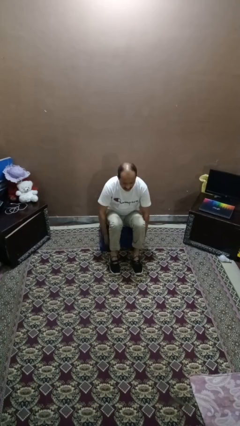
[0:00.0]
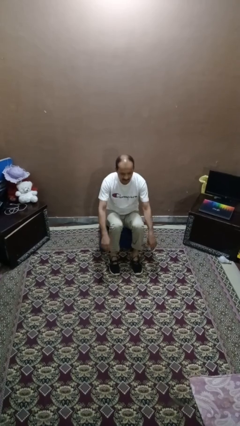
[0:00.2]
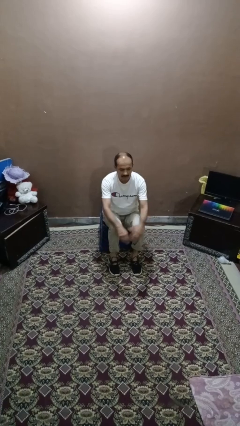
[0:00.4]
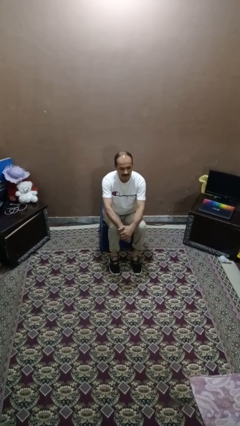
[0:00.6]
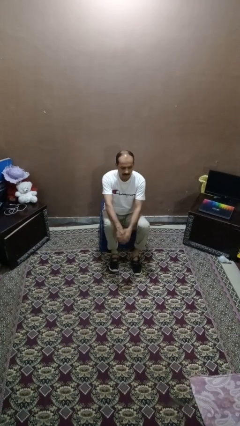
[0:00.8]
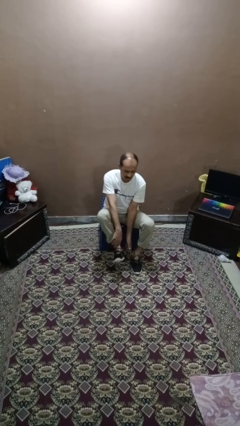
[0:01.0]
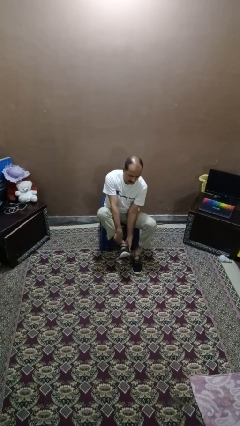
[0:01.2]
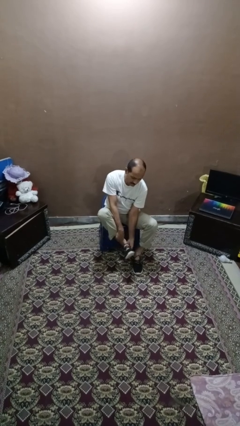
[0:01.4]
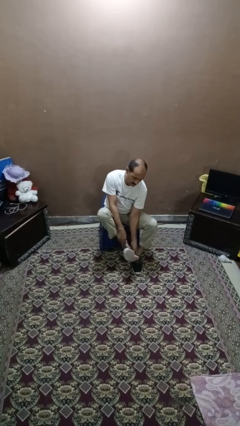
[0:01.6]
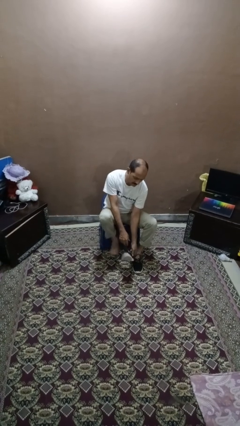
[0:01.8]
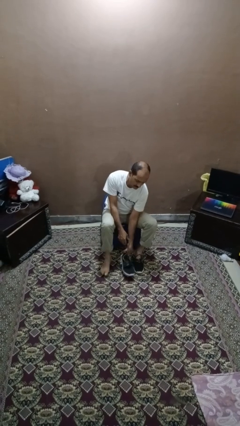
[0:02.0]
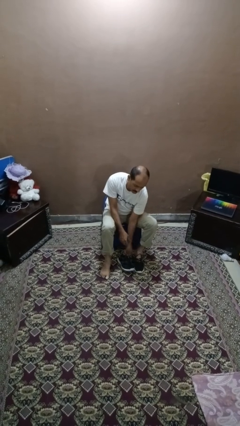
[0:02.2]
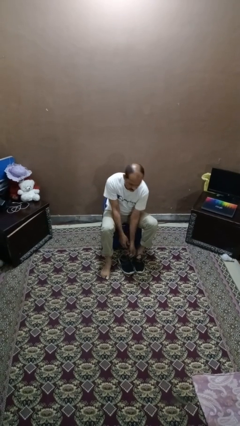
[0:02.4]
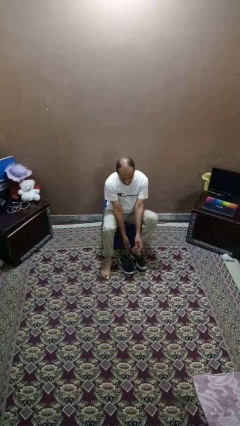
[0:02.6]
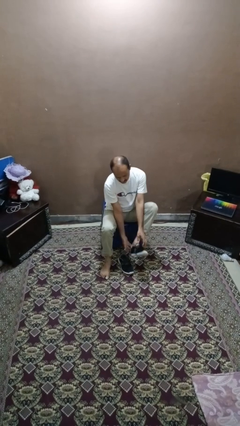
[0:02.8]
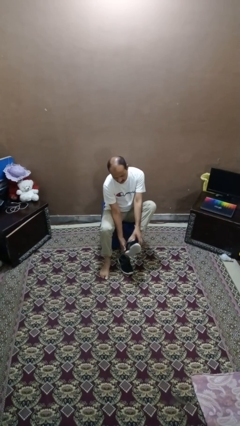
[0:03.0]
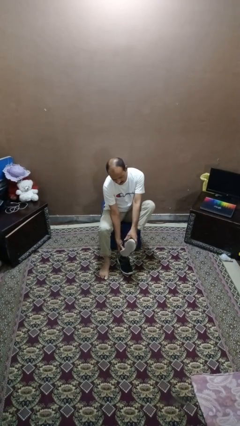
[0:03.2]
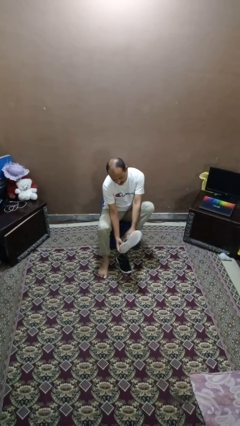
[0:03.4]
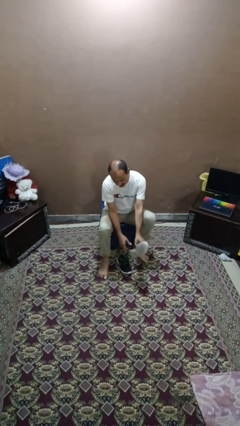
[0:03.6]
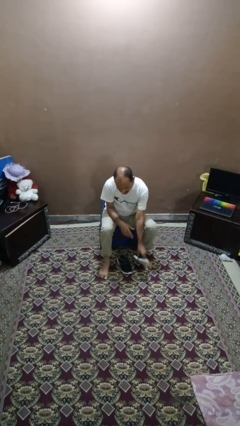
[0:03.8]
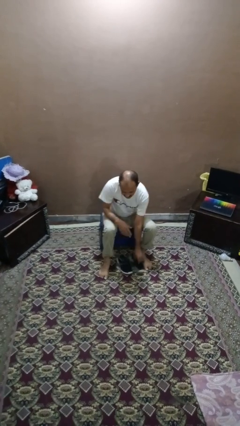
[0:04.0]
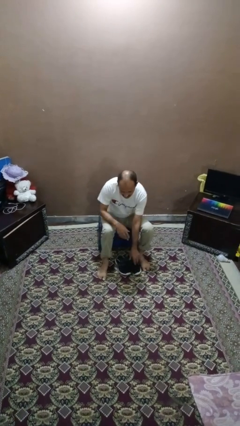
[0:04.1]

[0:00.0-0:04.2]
person takes off shoes

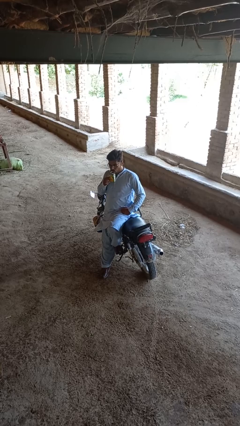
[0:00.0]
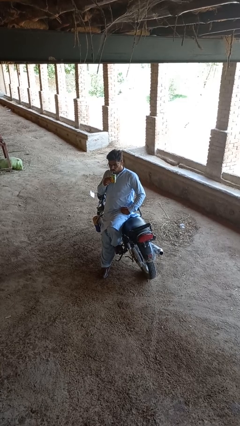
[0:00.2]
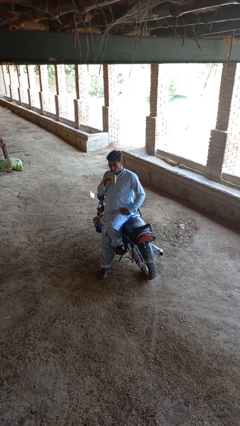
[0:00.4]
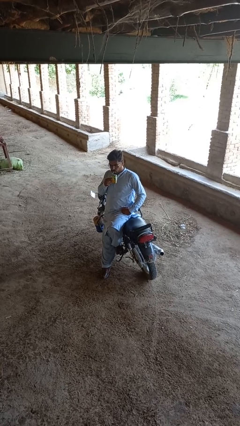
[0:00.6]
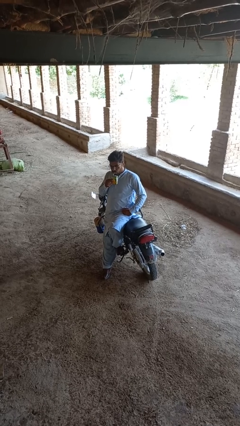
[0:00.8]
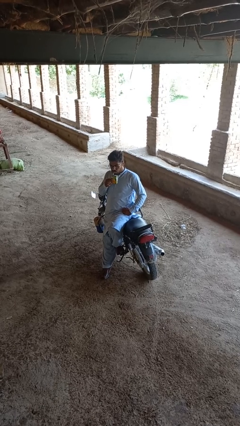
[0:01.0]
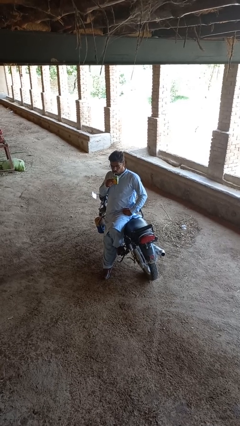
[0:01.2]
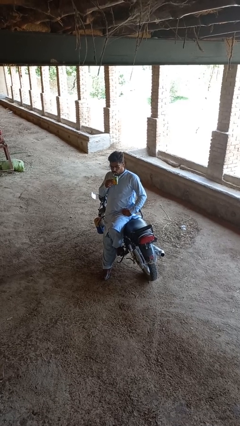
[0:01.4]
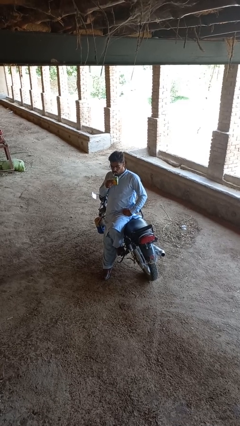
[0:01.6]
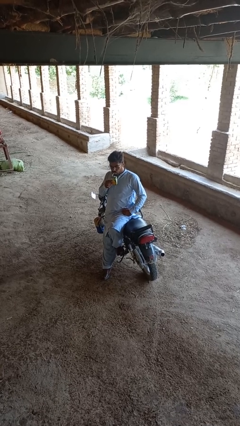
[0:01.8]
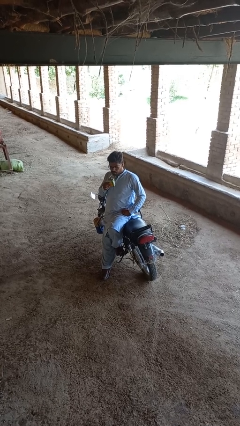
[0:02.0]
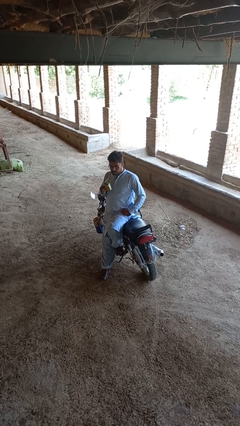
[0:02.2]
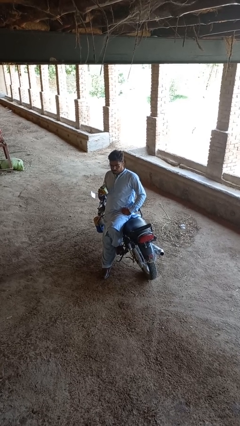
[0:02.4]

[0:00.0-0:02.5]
person drinks from straw

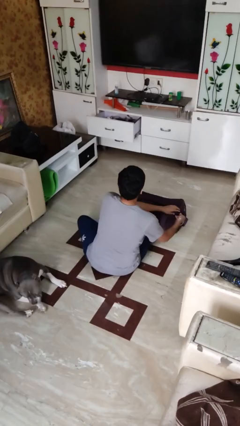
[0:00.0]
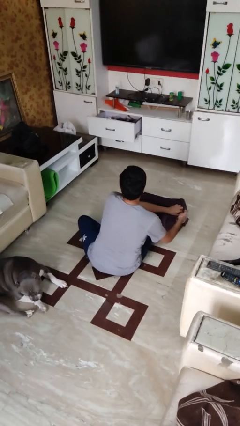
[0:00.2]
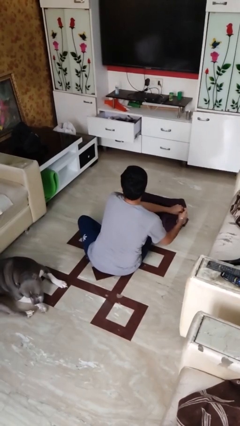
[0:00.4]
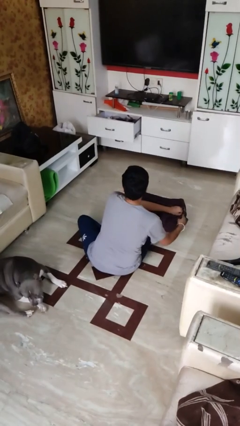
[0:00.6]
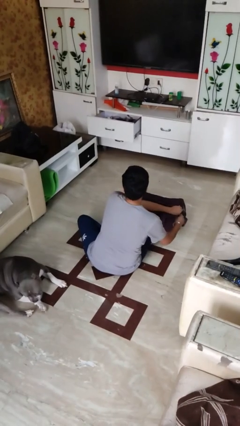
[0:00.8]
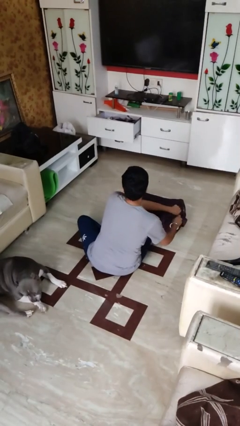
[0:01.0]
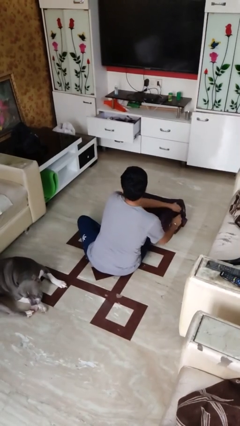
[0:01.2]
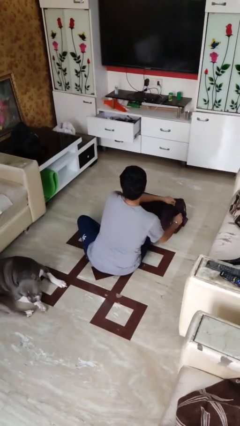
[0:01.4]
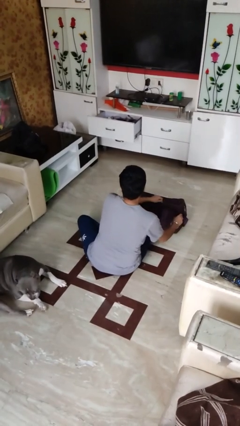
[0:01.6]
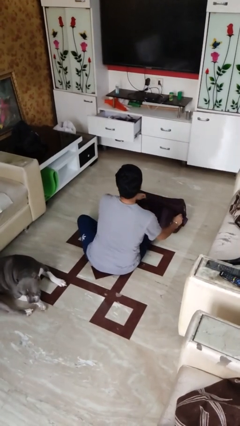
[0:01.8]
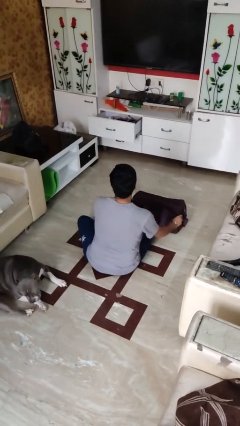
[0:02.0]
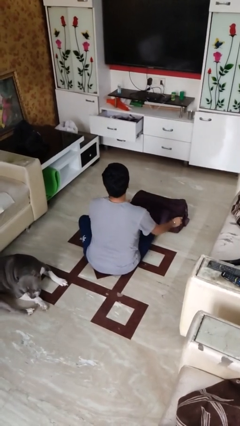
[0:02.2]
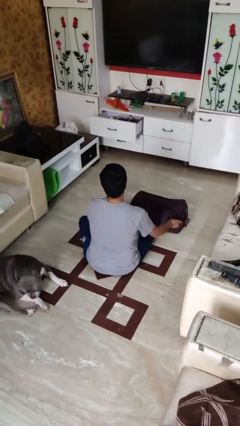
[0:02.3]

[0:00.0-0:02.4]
person closes suitcase

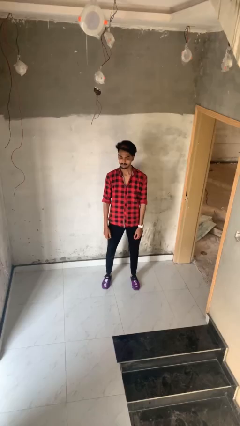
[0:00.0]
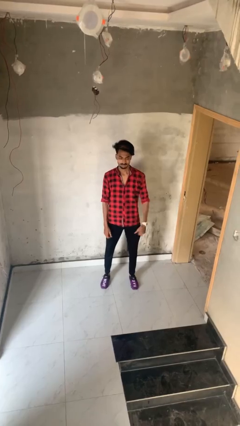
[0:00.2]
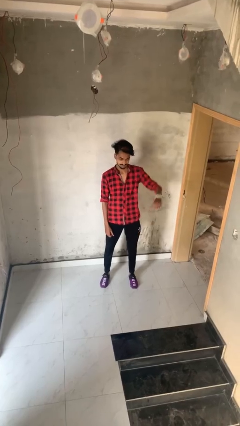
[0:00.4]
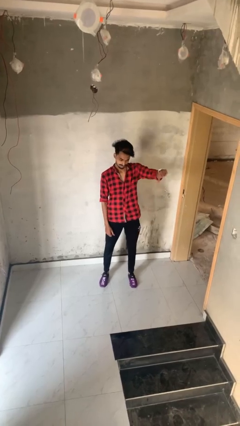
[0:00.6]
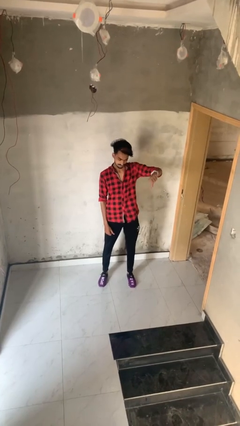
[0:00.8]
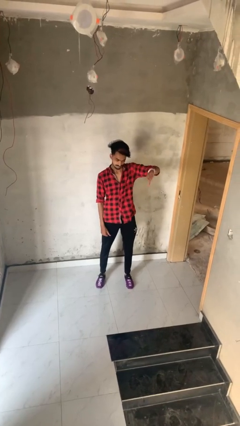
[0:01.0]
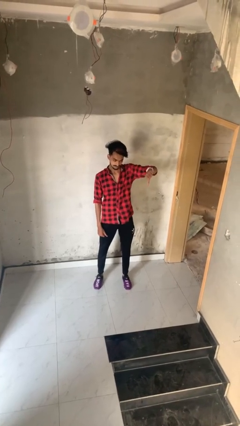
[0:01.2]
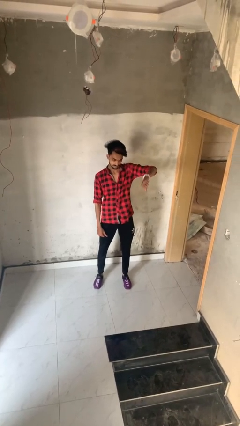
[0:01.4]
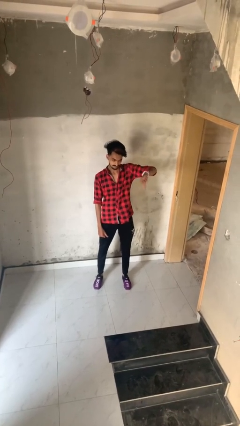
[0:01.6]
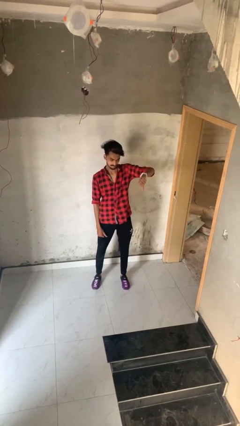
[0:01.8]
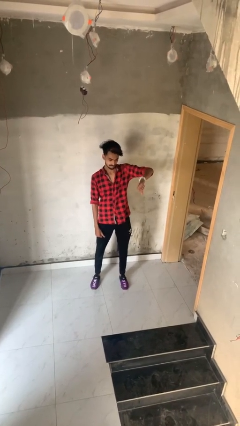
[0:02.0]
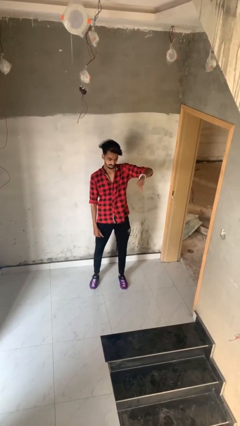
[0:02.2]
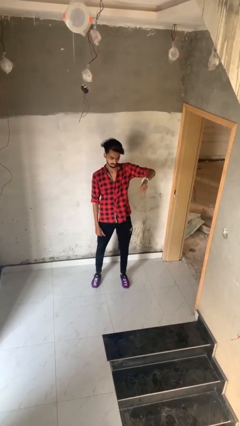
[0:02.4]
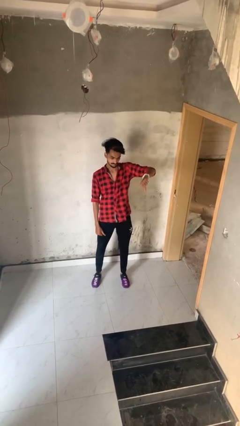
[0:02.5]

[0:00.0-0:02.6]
person gestures thumbs down

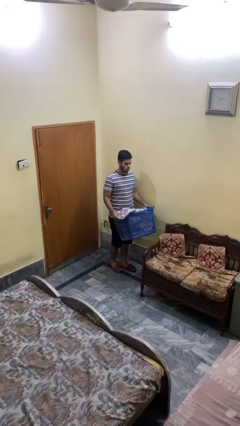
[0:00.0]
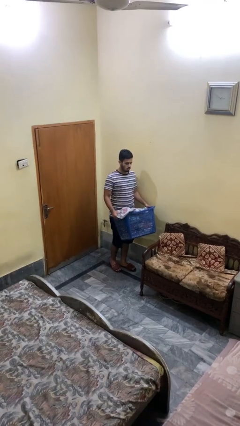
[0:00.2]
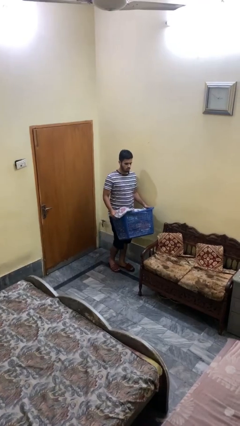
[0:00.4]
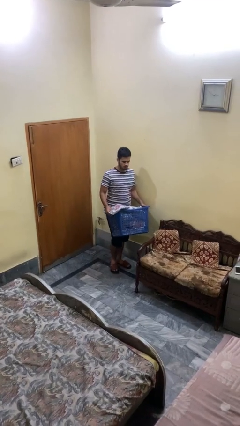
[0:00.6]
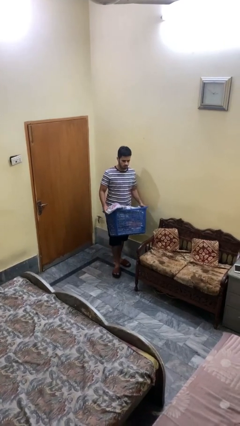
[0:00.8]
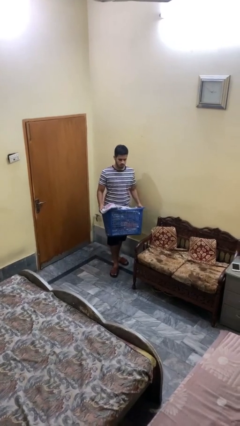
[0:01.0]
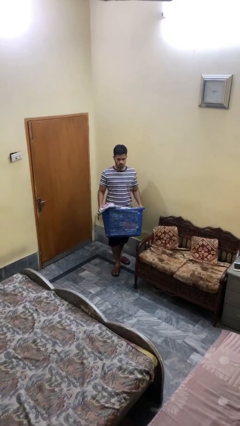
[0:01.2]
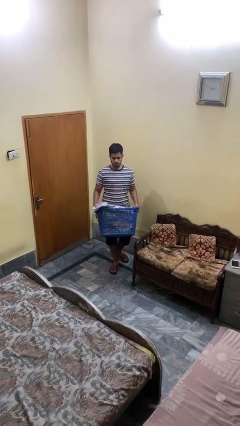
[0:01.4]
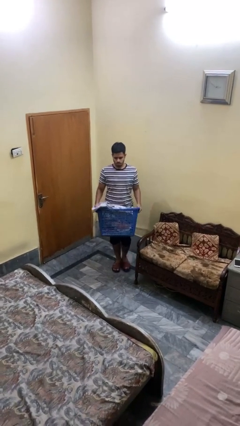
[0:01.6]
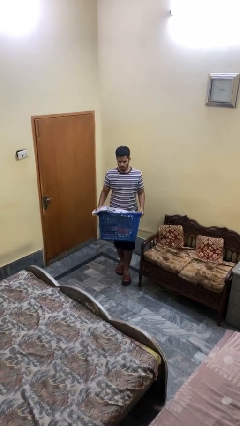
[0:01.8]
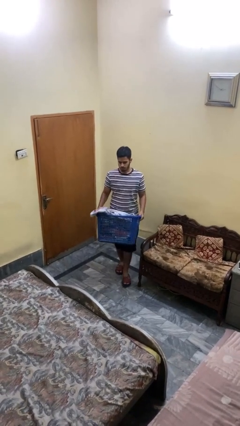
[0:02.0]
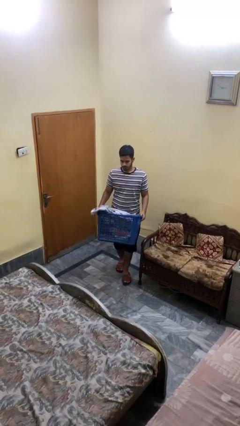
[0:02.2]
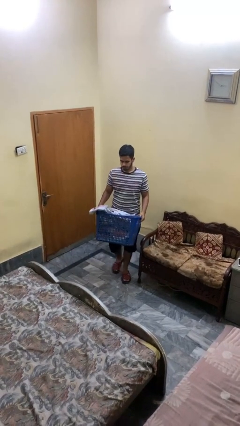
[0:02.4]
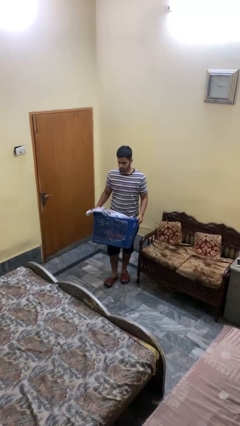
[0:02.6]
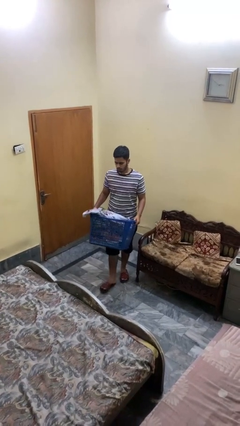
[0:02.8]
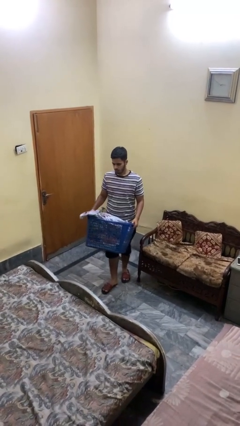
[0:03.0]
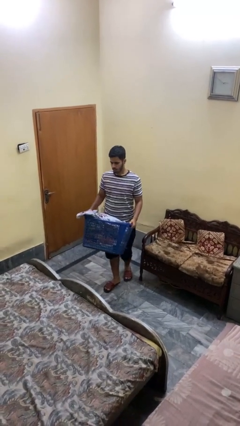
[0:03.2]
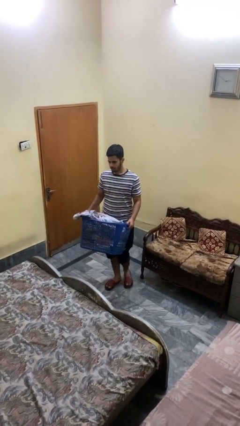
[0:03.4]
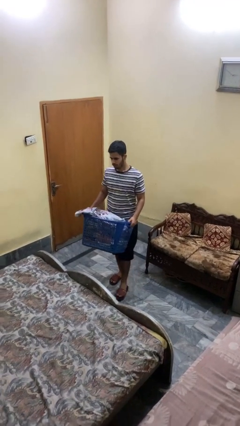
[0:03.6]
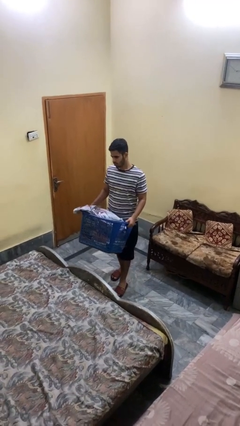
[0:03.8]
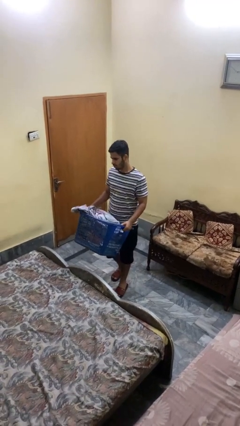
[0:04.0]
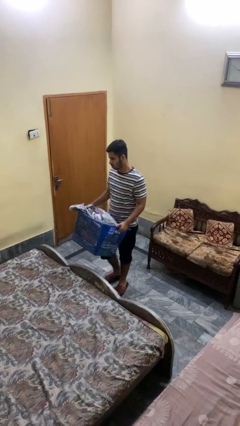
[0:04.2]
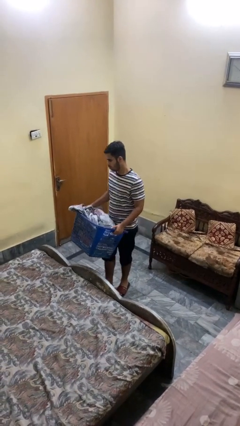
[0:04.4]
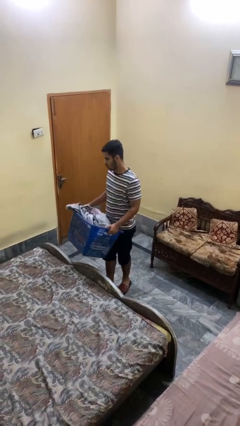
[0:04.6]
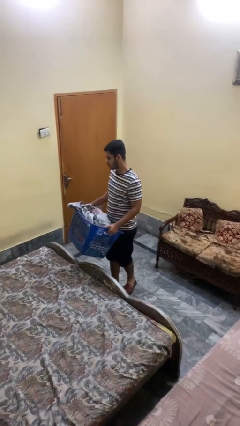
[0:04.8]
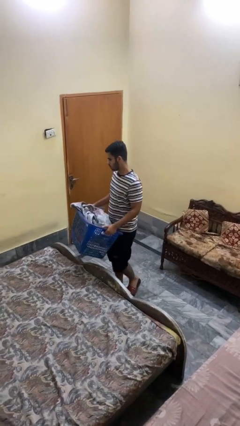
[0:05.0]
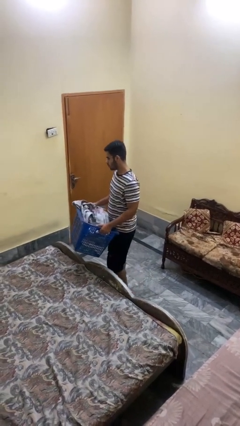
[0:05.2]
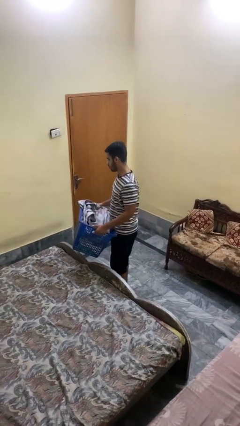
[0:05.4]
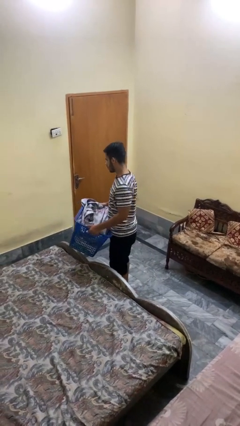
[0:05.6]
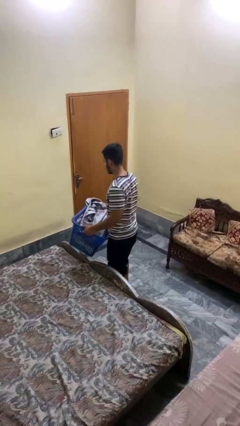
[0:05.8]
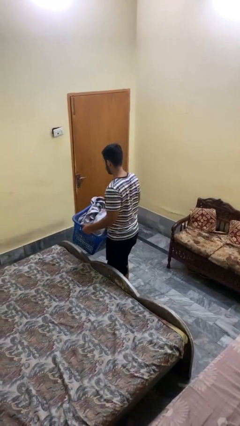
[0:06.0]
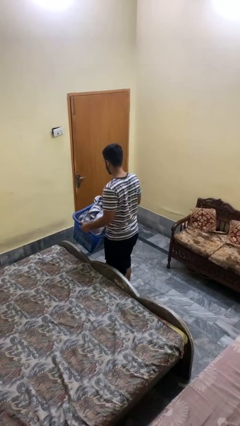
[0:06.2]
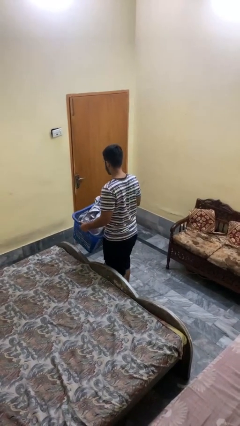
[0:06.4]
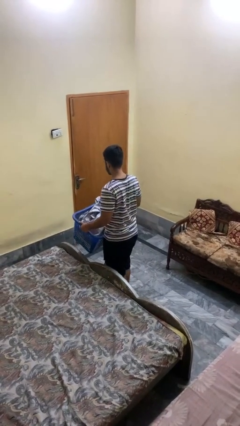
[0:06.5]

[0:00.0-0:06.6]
person carries laundry basket
